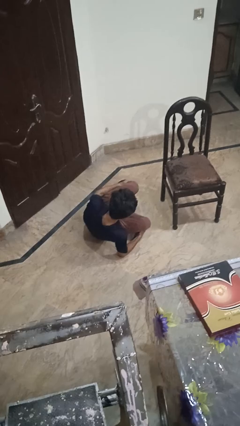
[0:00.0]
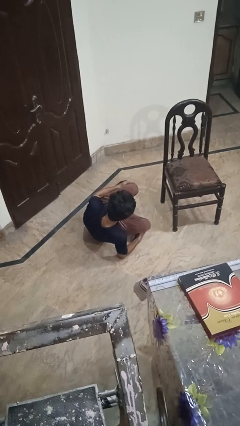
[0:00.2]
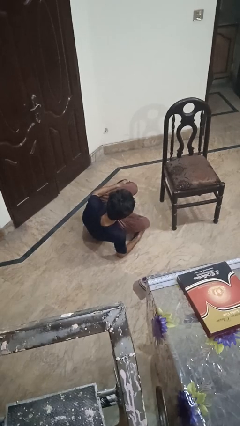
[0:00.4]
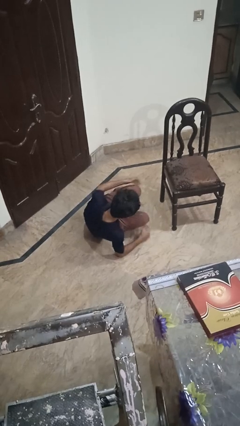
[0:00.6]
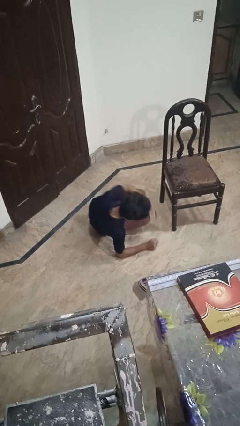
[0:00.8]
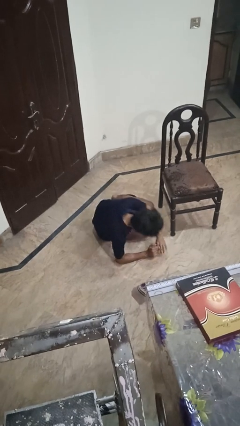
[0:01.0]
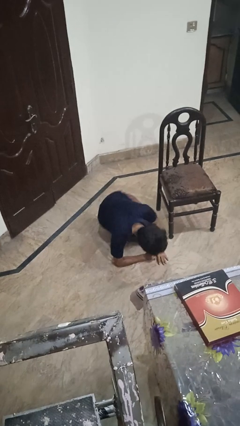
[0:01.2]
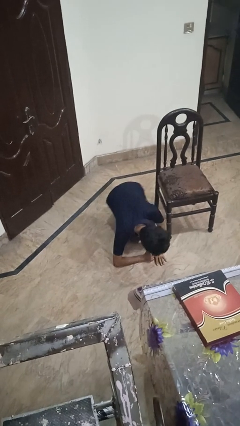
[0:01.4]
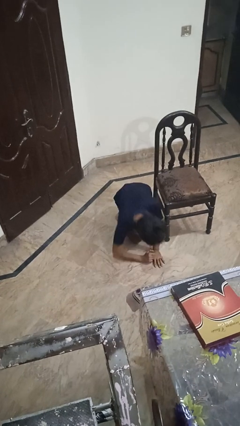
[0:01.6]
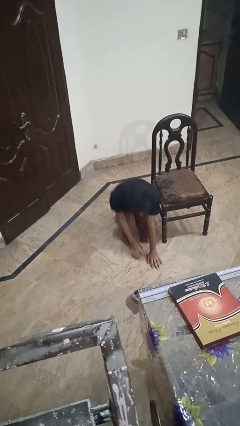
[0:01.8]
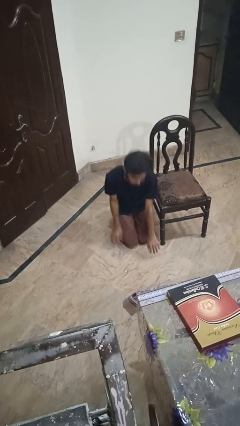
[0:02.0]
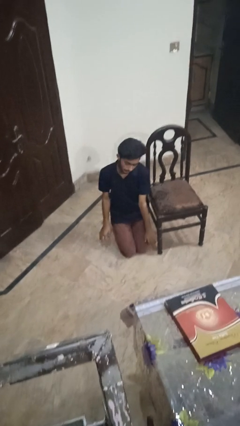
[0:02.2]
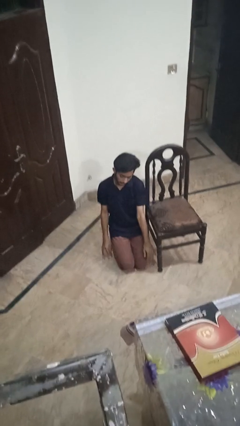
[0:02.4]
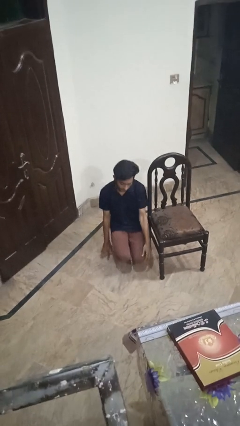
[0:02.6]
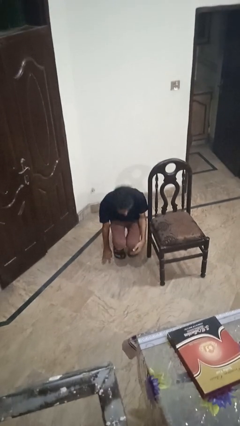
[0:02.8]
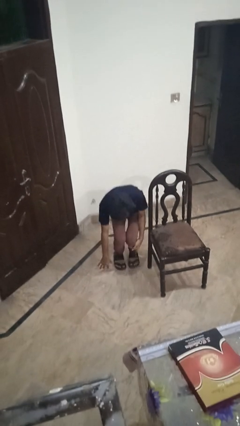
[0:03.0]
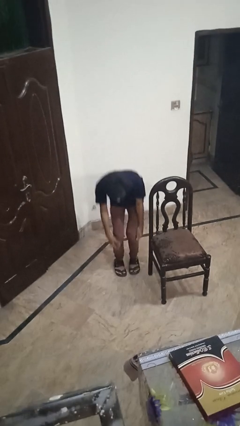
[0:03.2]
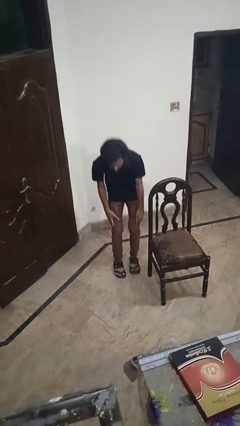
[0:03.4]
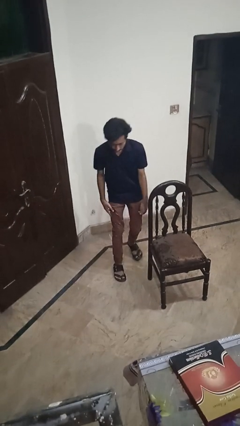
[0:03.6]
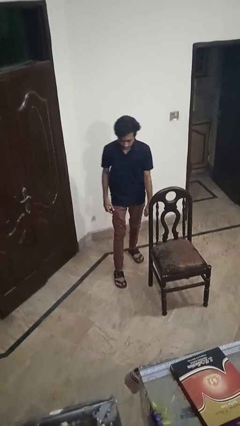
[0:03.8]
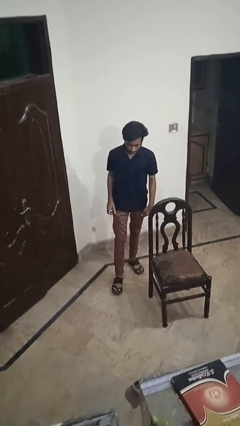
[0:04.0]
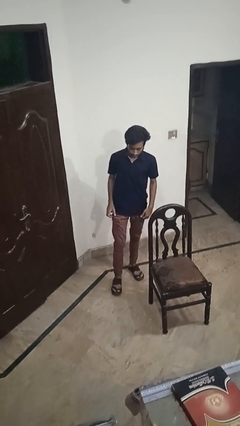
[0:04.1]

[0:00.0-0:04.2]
person stands up from floor

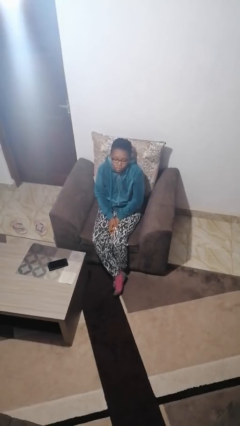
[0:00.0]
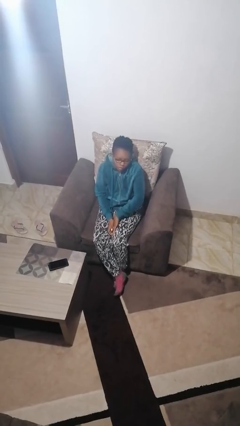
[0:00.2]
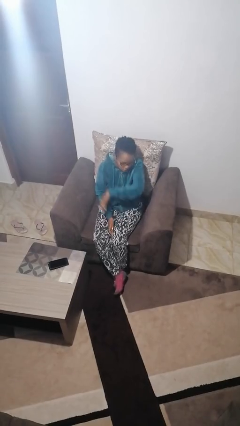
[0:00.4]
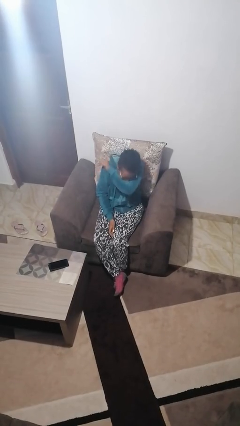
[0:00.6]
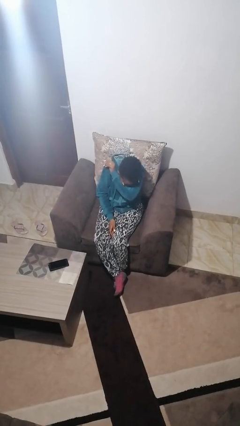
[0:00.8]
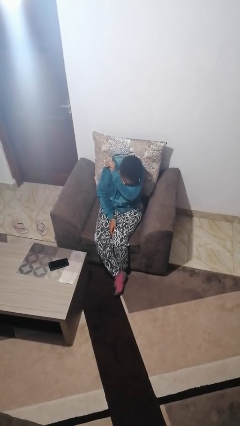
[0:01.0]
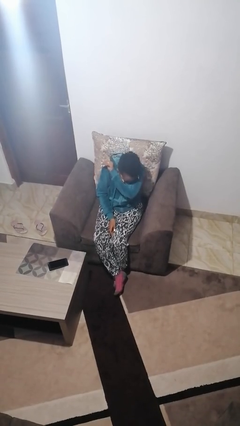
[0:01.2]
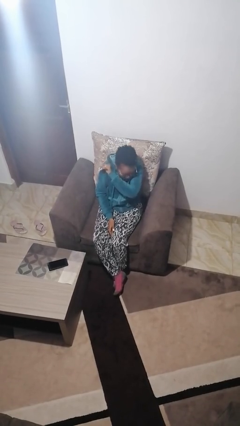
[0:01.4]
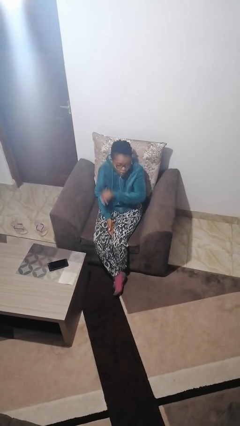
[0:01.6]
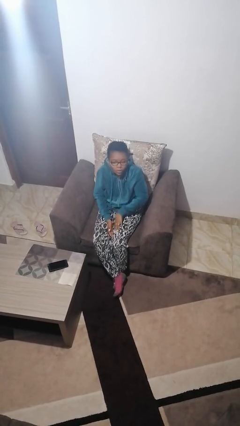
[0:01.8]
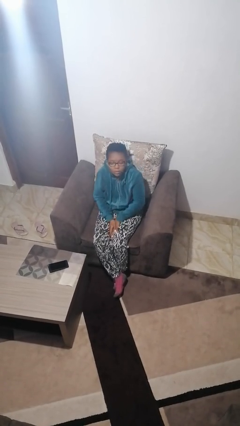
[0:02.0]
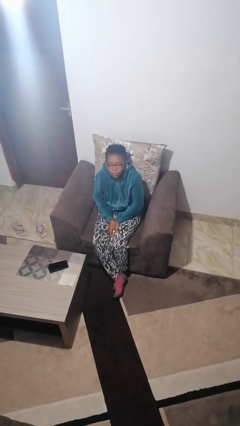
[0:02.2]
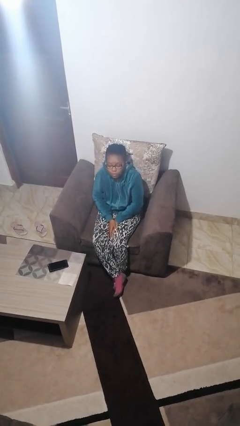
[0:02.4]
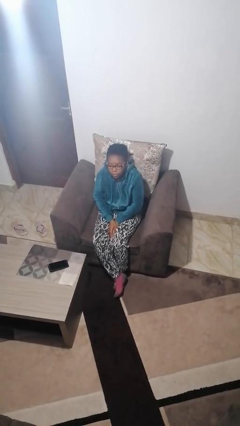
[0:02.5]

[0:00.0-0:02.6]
person sneezes into arm

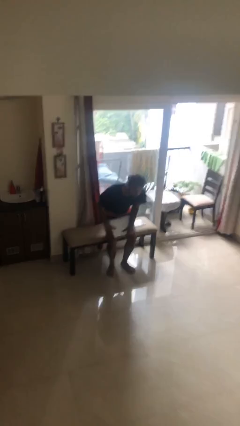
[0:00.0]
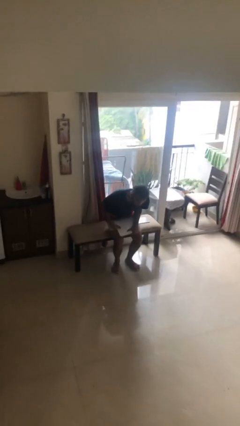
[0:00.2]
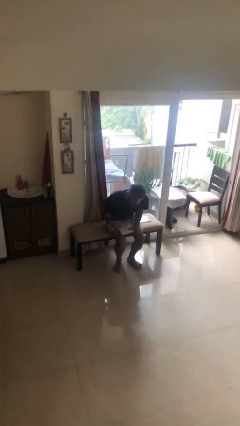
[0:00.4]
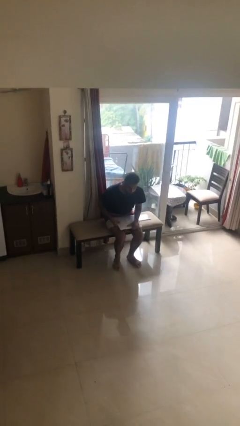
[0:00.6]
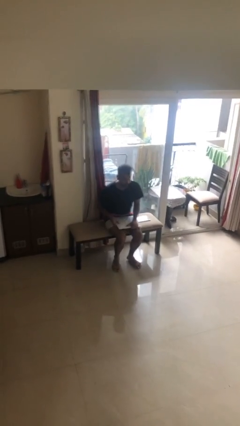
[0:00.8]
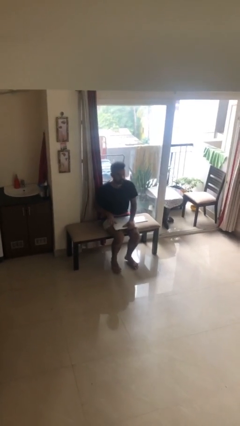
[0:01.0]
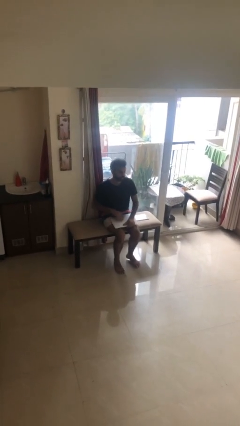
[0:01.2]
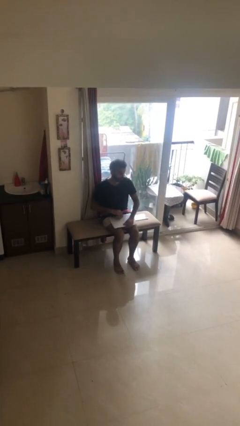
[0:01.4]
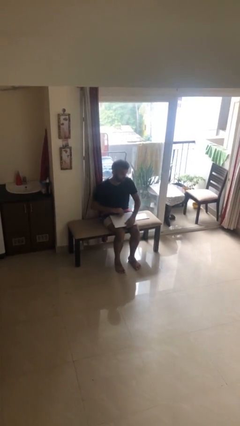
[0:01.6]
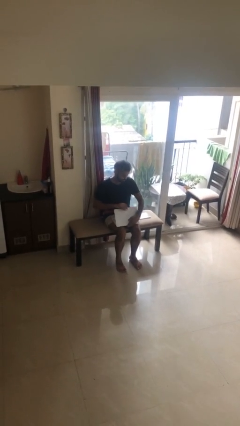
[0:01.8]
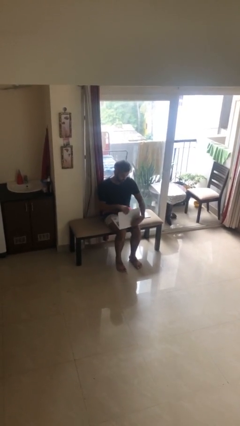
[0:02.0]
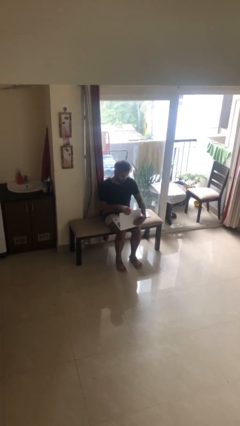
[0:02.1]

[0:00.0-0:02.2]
person sits down

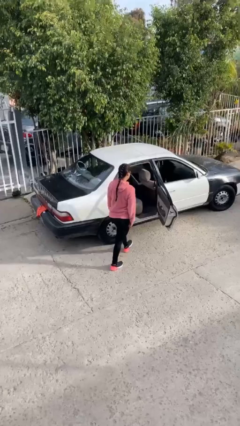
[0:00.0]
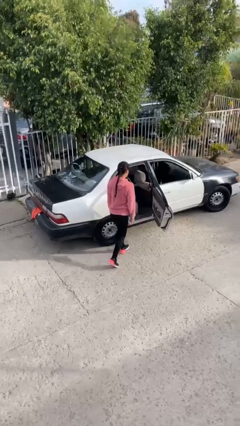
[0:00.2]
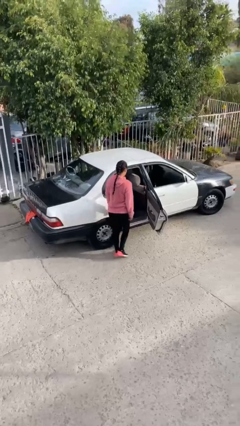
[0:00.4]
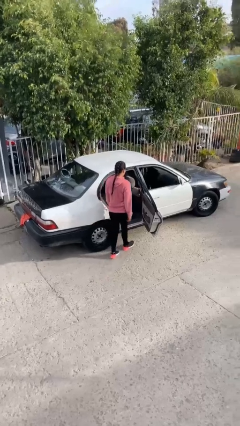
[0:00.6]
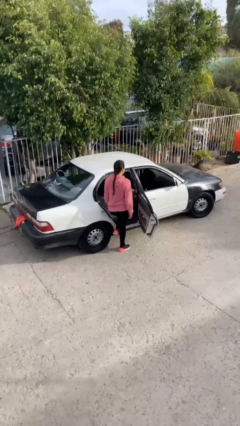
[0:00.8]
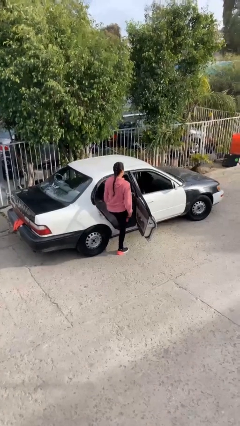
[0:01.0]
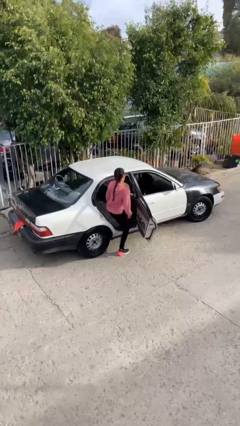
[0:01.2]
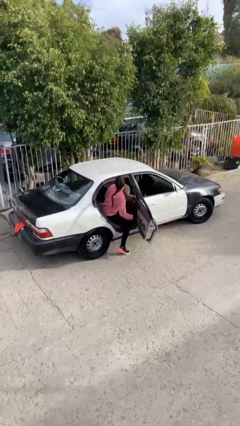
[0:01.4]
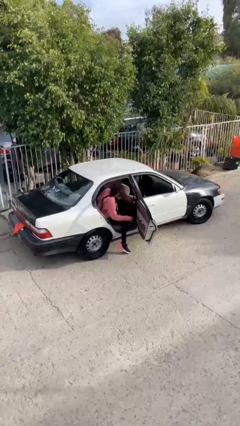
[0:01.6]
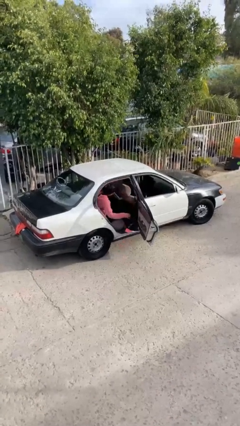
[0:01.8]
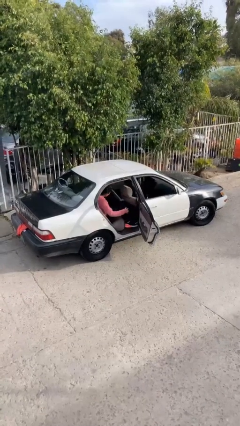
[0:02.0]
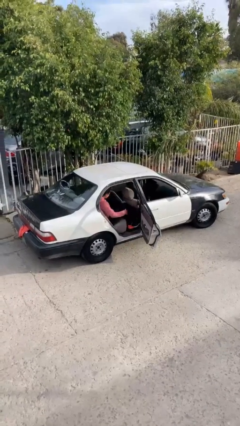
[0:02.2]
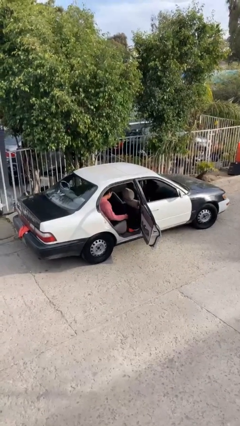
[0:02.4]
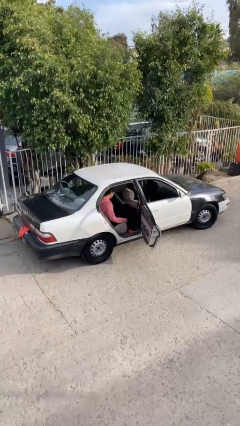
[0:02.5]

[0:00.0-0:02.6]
person enters car

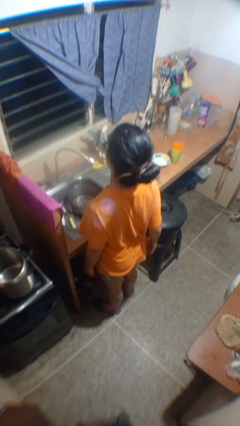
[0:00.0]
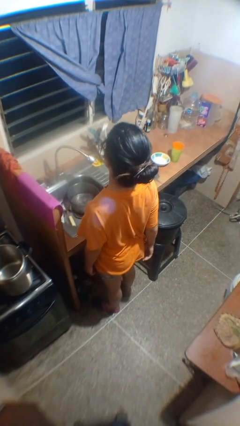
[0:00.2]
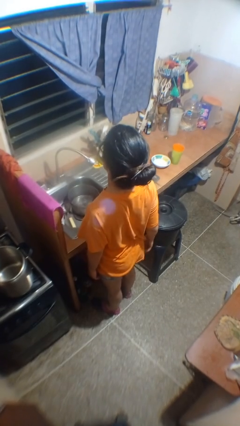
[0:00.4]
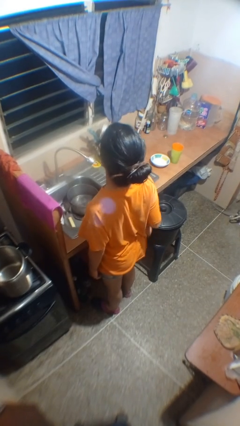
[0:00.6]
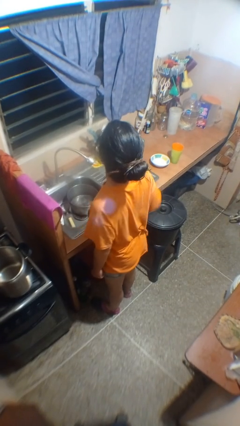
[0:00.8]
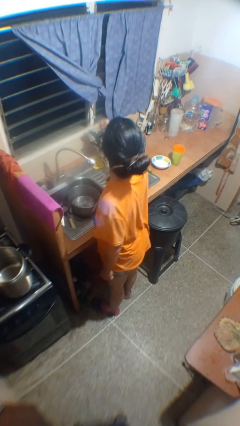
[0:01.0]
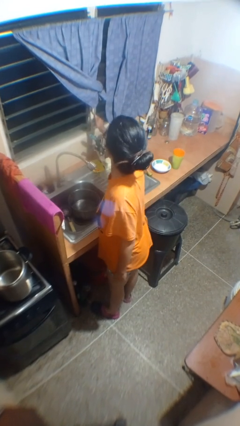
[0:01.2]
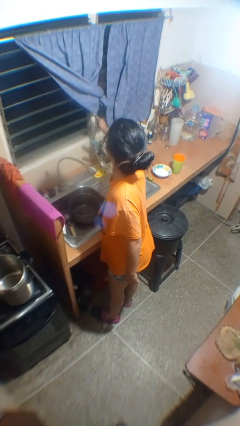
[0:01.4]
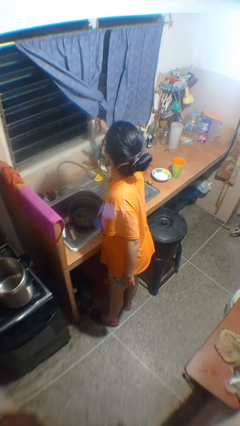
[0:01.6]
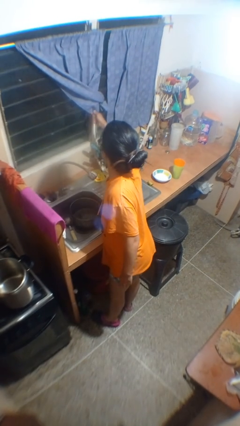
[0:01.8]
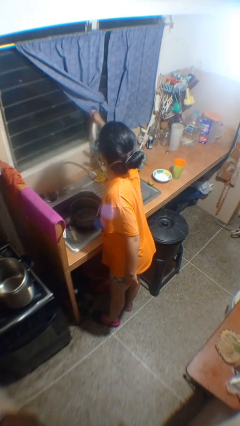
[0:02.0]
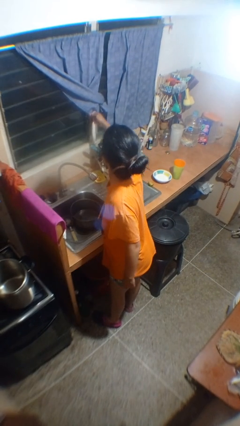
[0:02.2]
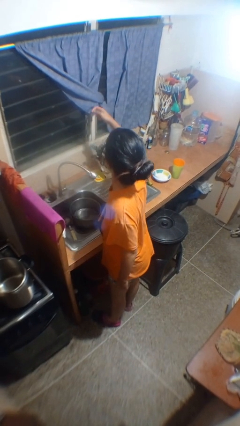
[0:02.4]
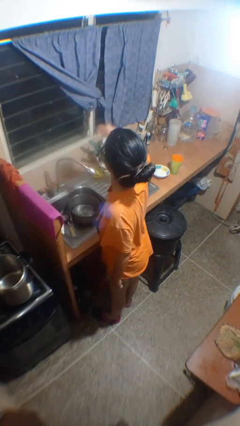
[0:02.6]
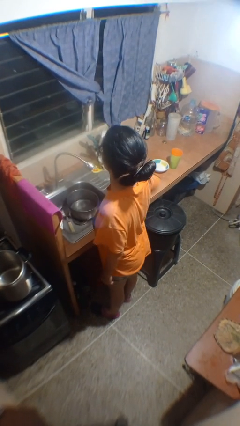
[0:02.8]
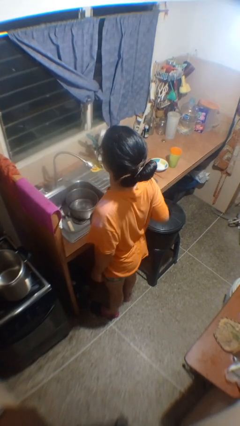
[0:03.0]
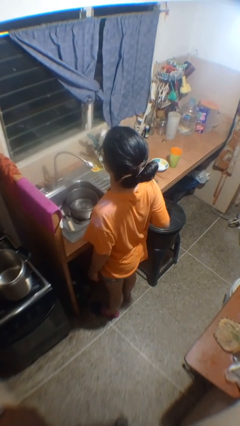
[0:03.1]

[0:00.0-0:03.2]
person closes home window

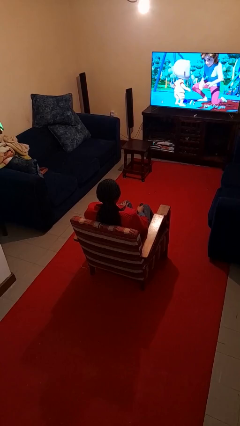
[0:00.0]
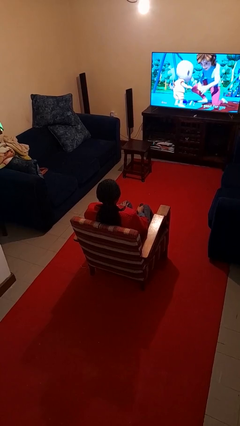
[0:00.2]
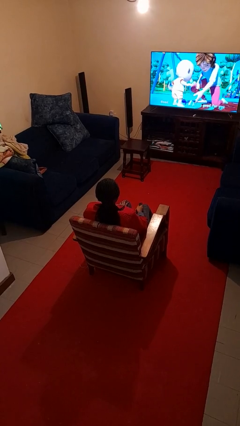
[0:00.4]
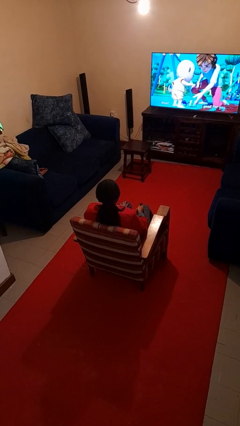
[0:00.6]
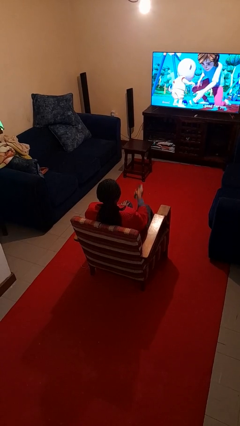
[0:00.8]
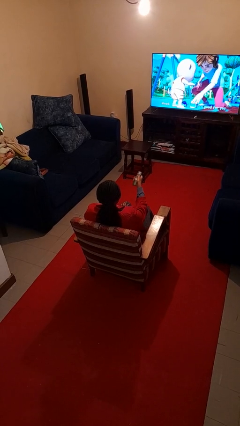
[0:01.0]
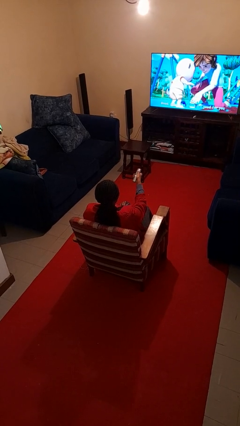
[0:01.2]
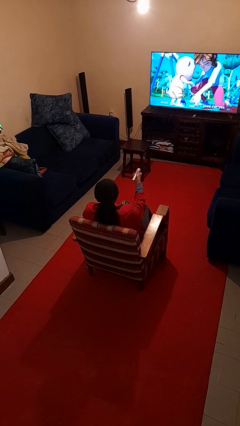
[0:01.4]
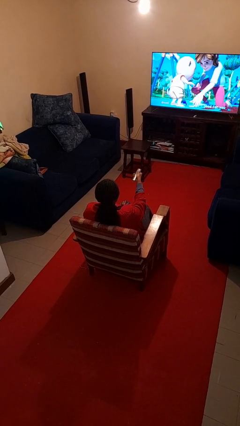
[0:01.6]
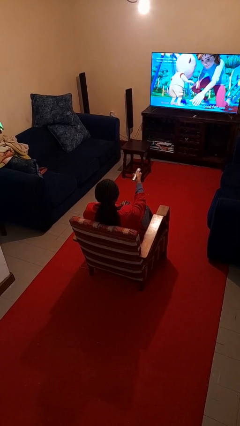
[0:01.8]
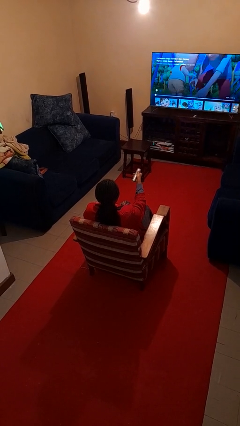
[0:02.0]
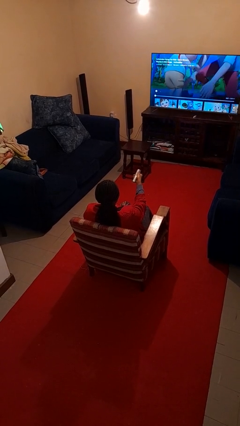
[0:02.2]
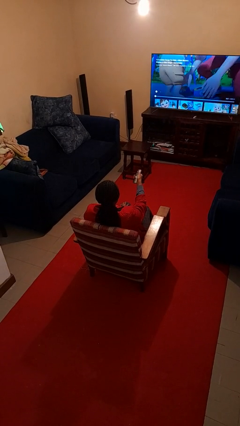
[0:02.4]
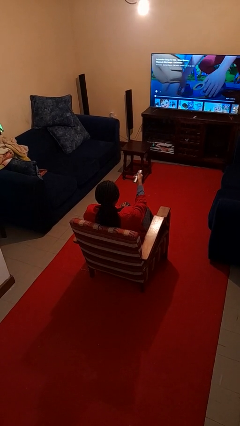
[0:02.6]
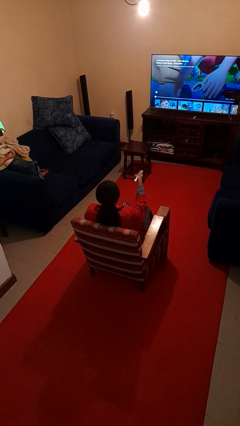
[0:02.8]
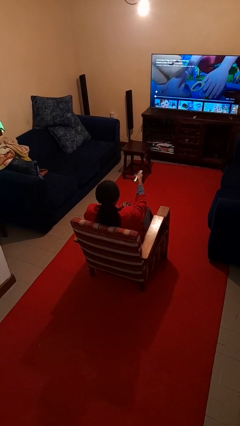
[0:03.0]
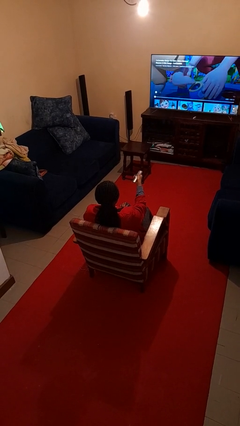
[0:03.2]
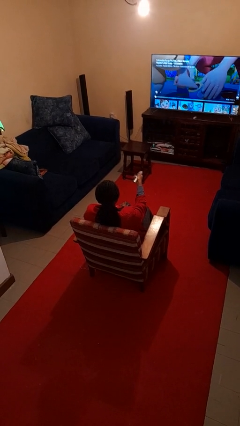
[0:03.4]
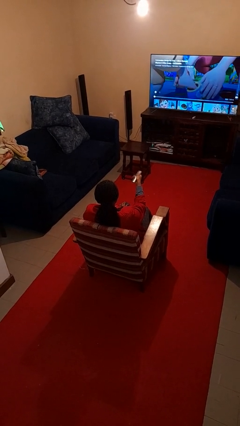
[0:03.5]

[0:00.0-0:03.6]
person uses television remote
